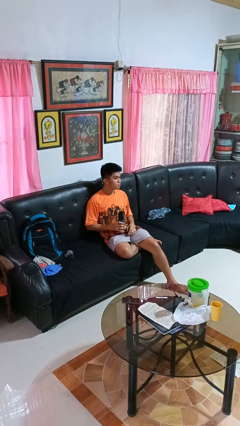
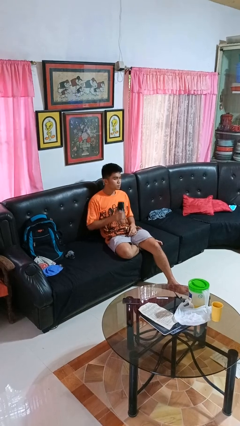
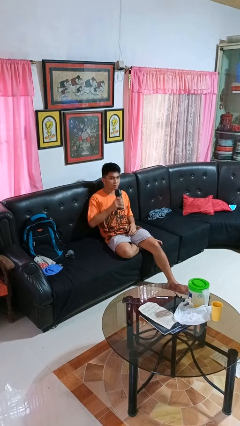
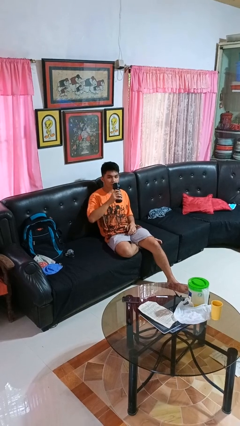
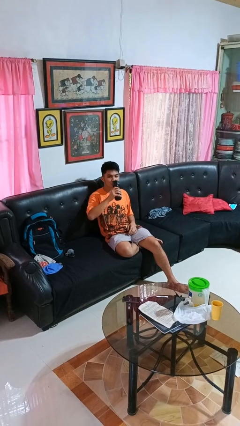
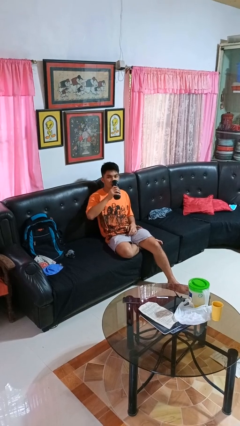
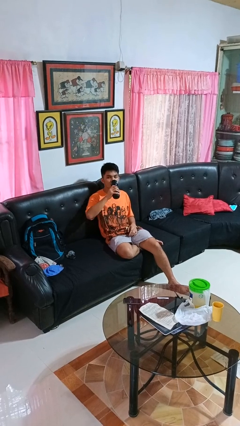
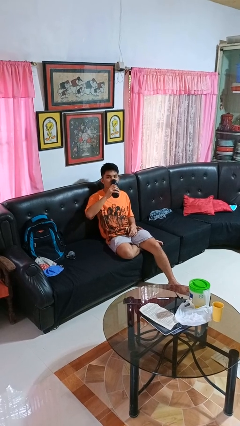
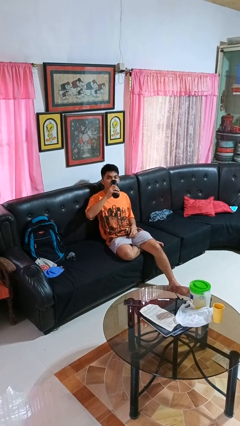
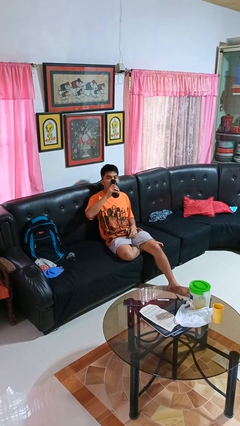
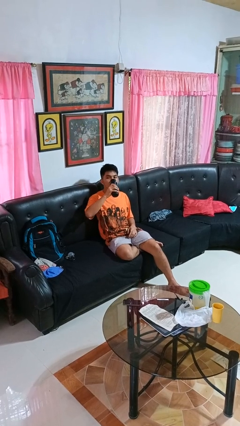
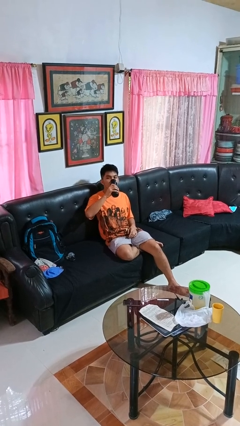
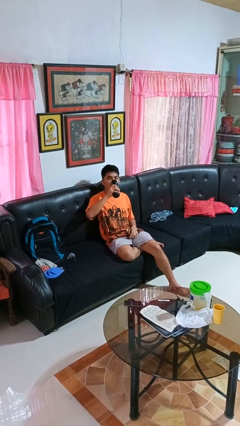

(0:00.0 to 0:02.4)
person drinks from bottle

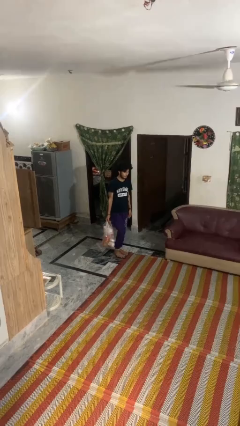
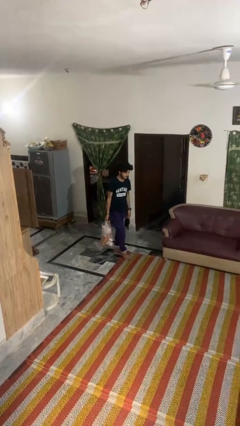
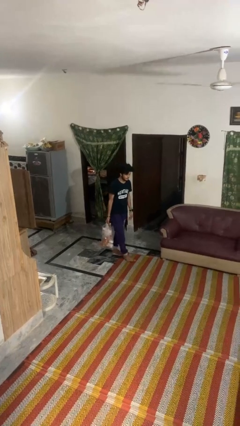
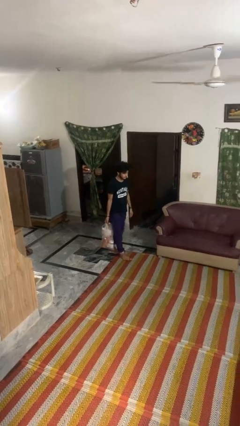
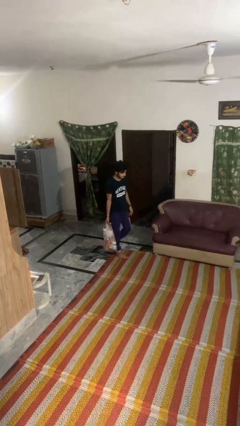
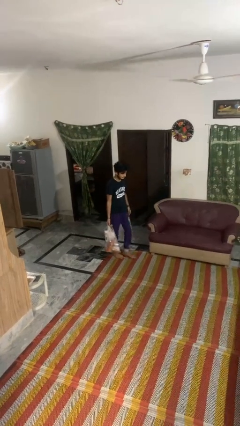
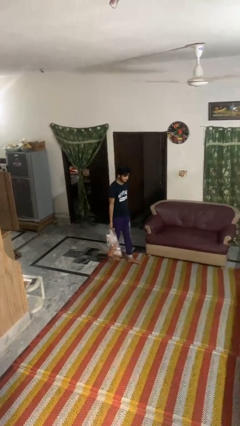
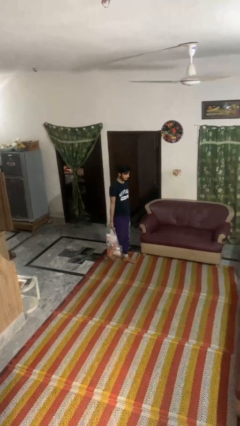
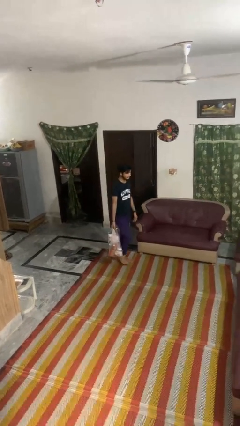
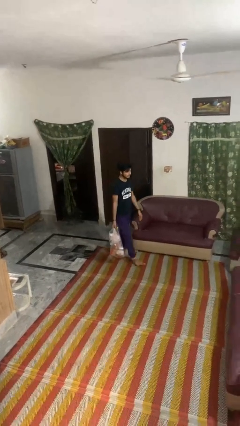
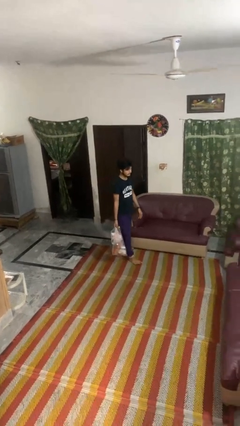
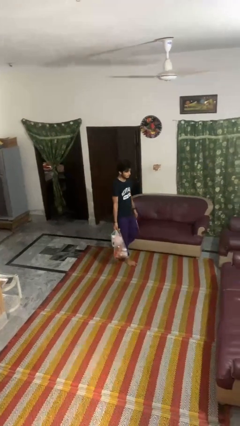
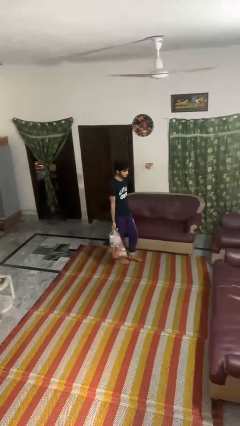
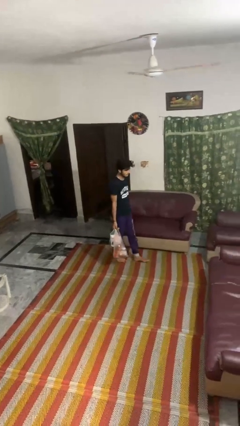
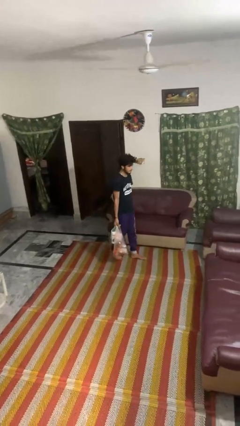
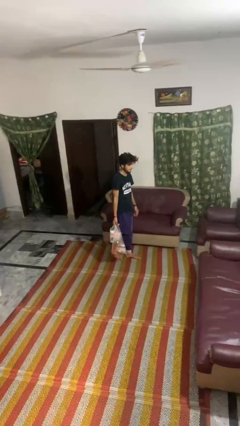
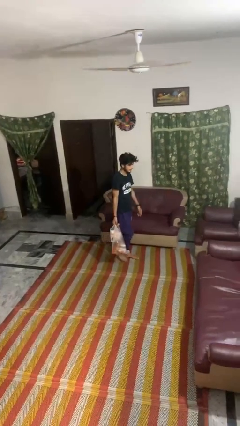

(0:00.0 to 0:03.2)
person carries groceries

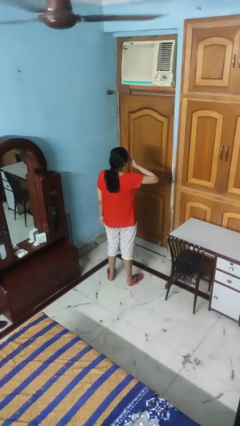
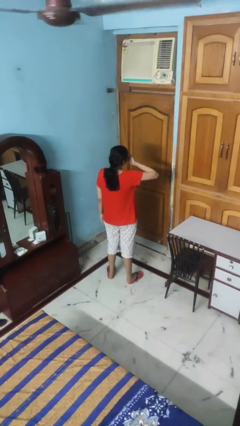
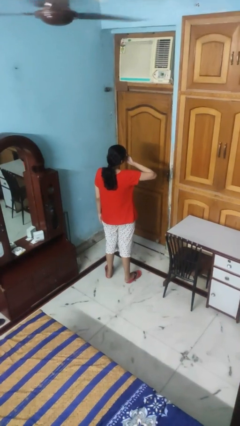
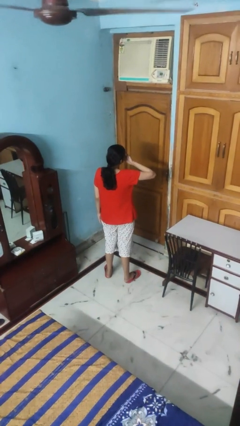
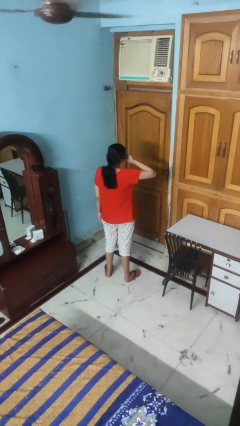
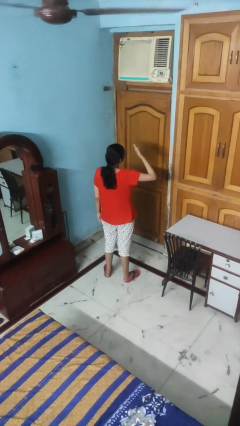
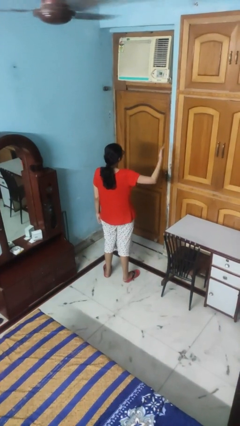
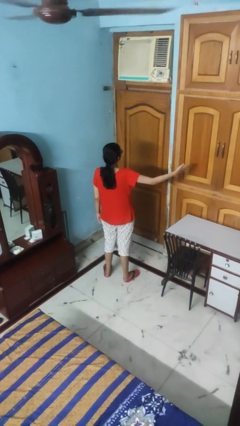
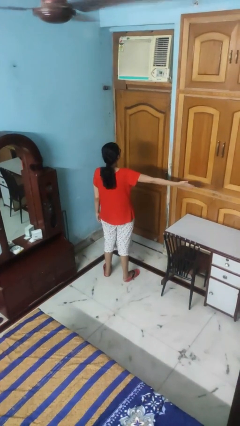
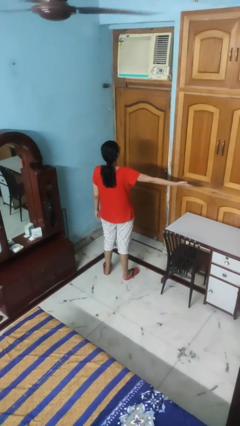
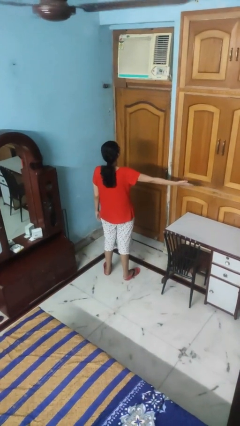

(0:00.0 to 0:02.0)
person gestures blow kiss

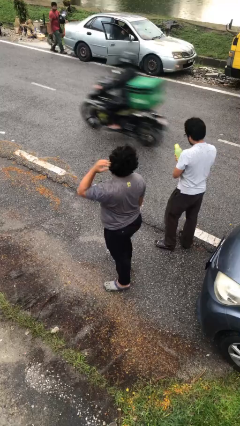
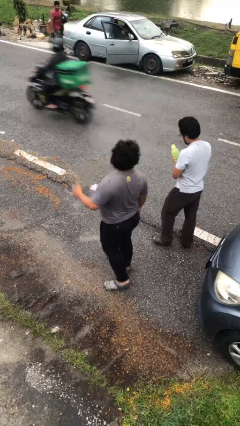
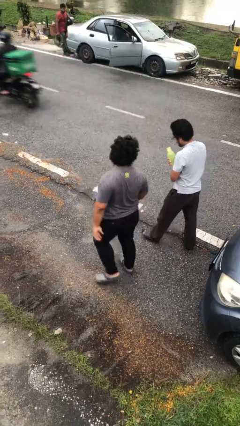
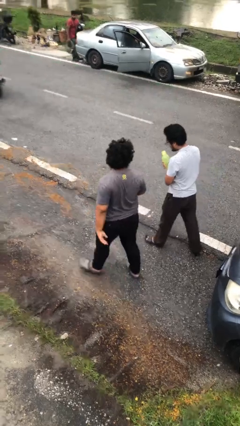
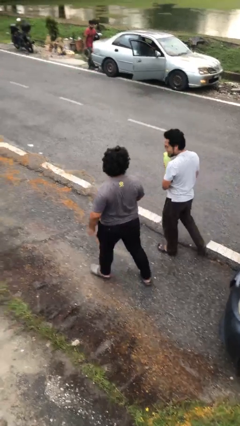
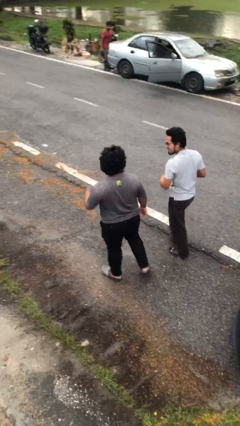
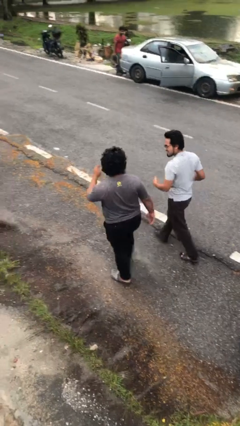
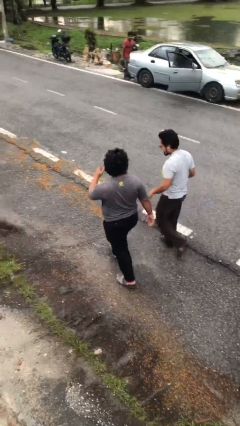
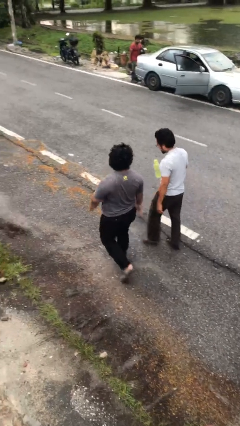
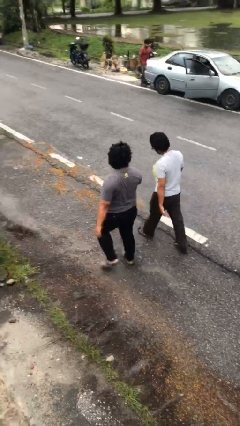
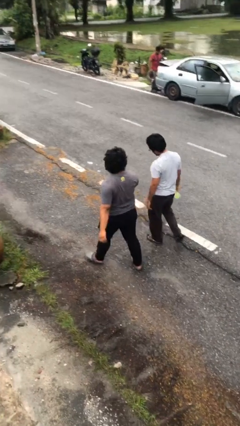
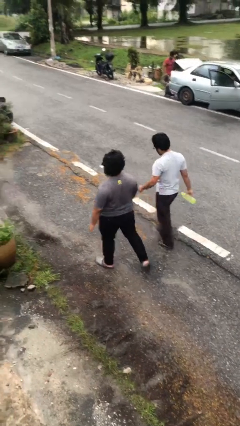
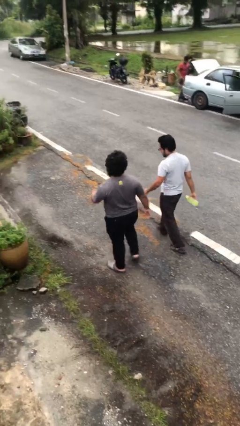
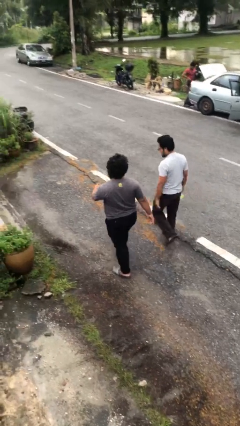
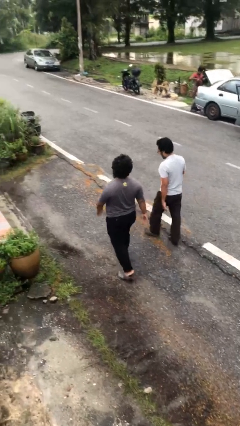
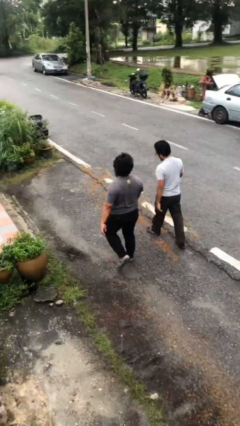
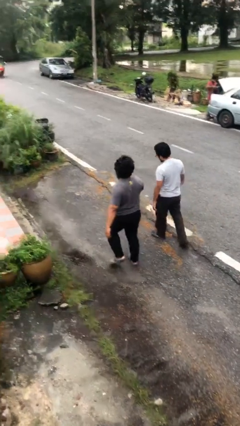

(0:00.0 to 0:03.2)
person talks to person

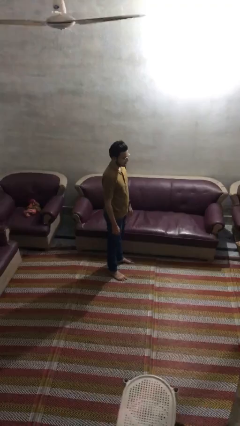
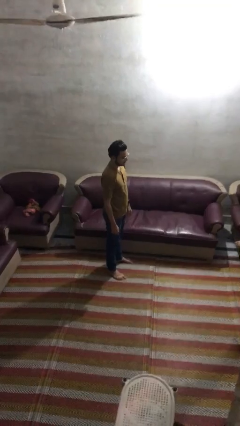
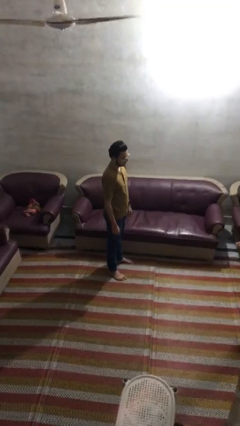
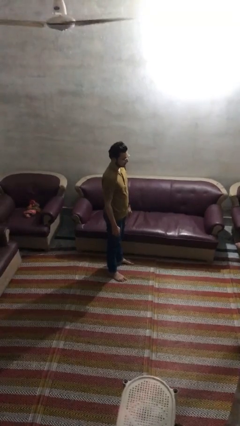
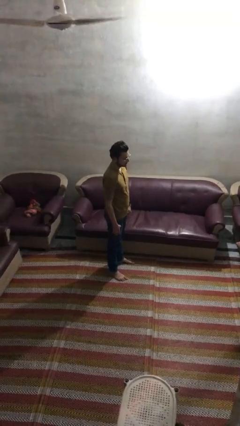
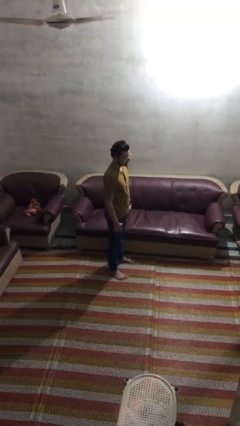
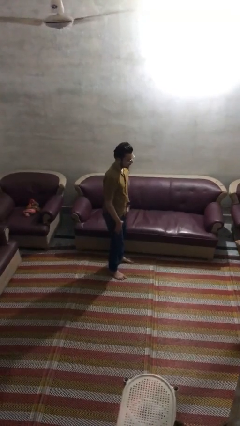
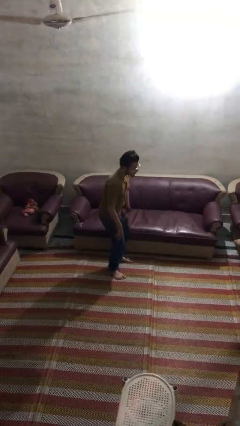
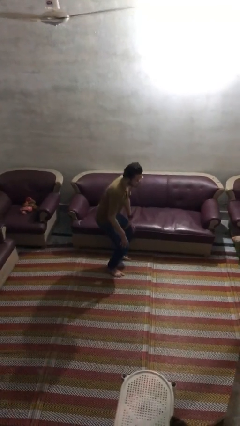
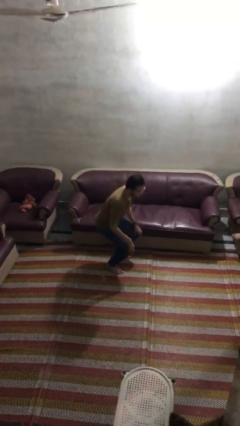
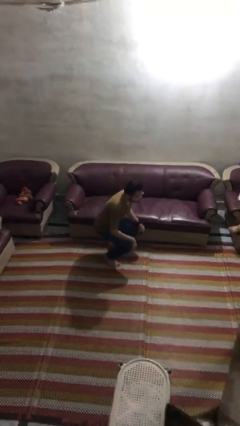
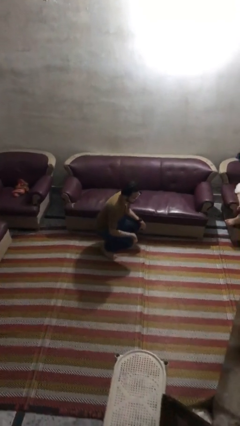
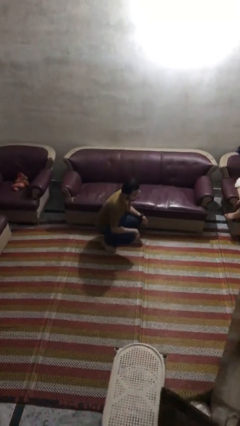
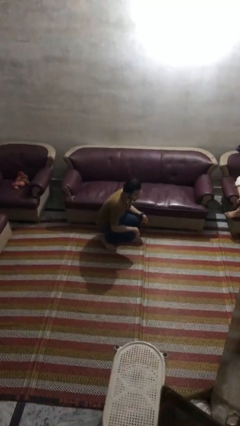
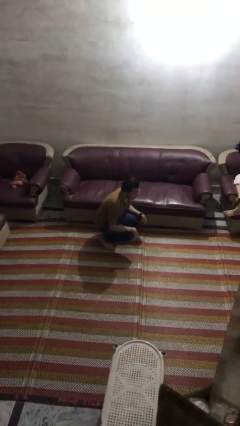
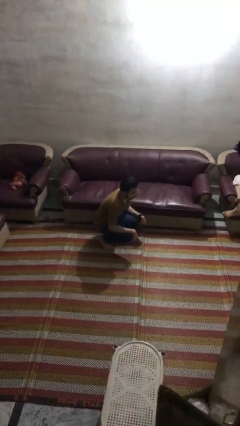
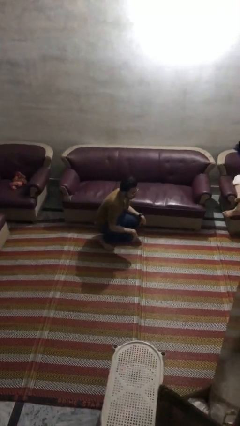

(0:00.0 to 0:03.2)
person squats

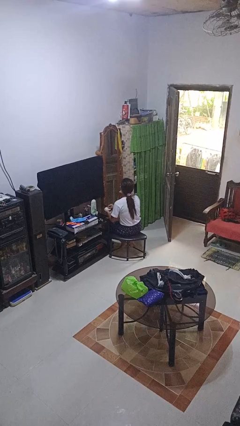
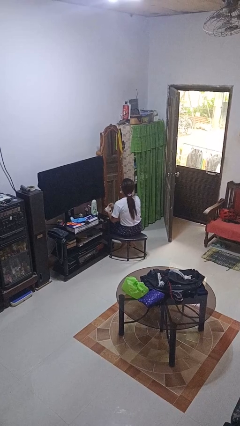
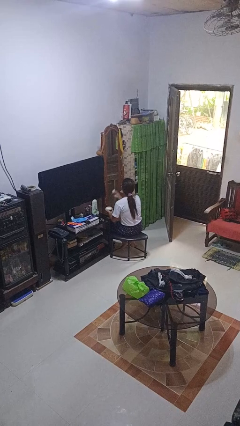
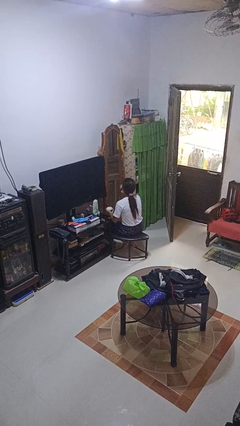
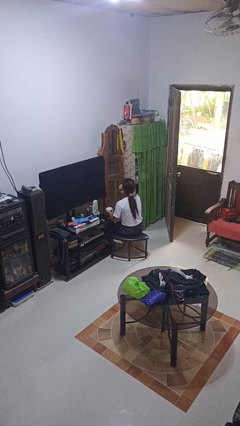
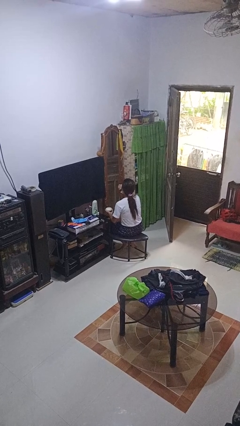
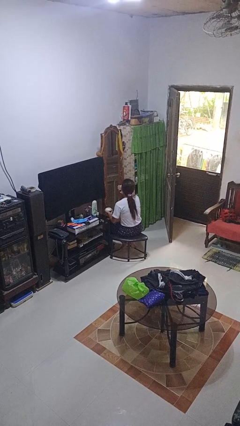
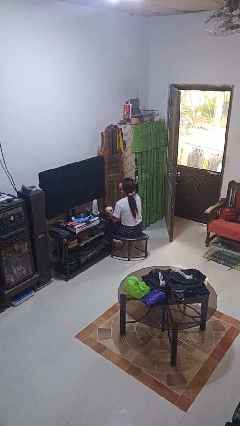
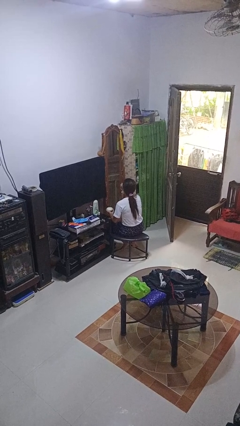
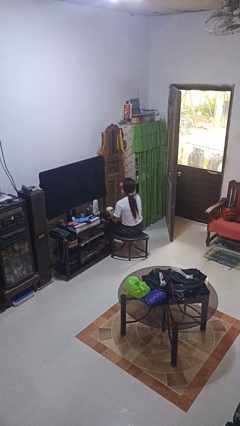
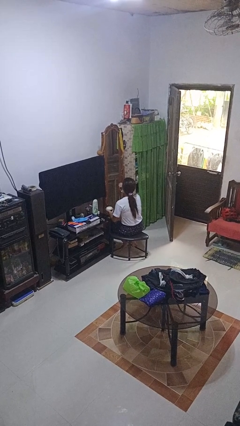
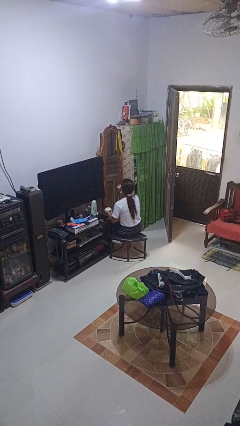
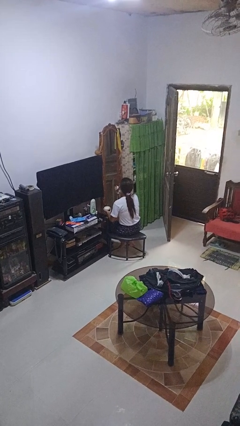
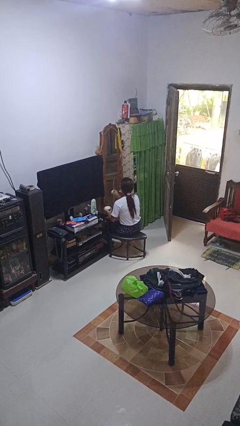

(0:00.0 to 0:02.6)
person applies foundation makeup

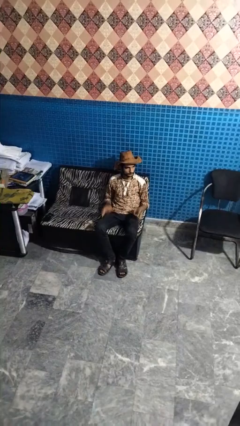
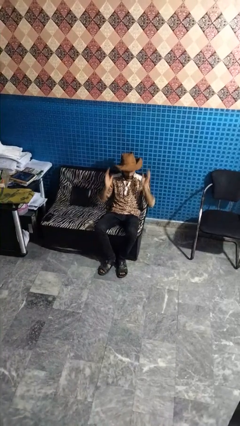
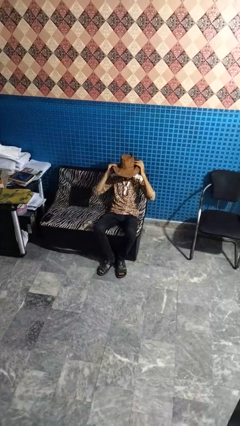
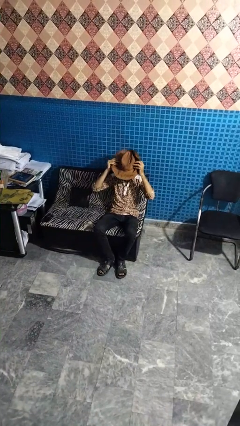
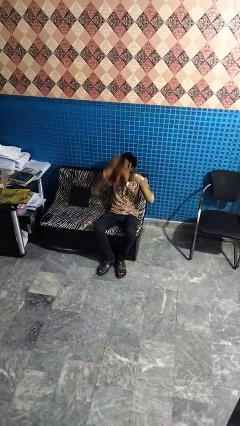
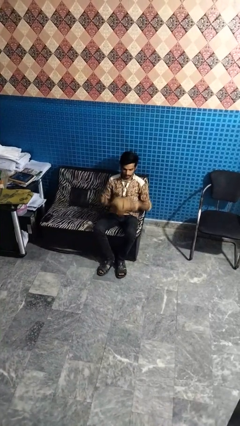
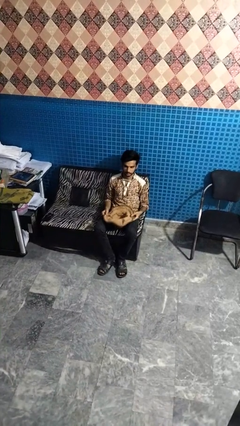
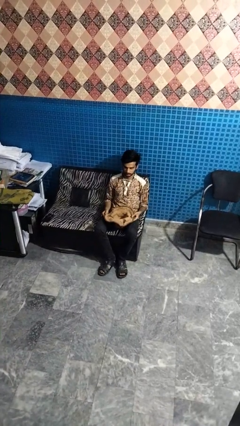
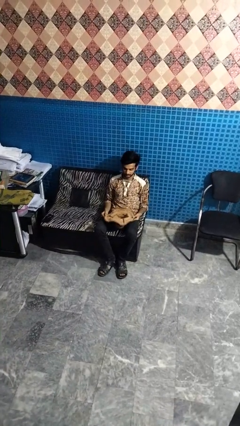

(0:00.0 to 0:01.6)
person takes off hat
